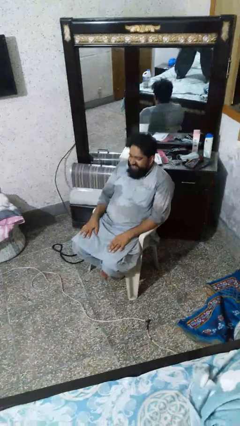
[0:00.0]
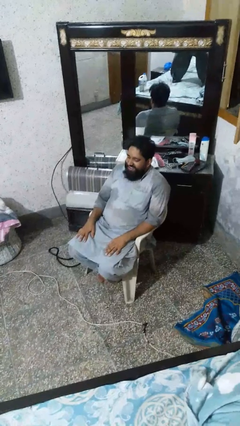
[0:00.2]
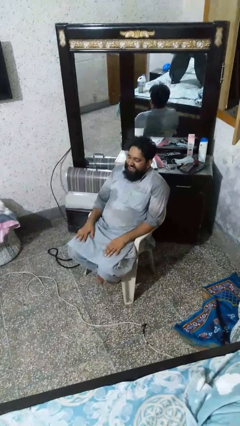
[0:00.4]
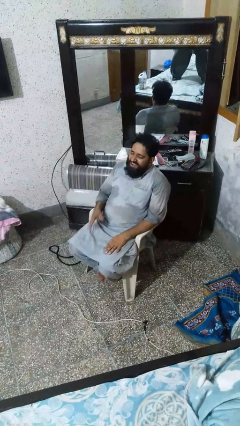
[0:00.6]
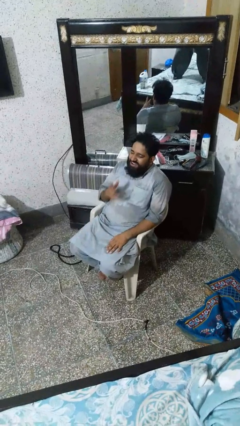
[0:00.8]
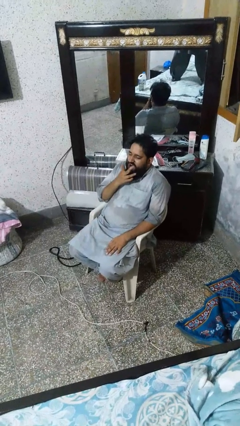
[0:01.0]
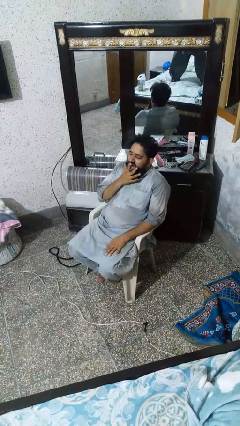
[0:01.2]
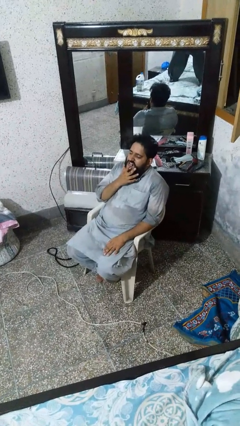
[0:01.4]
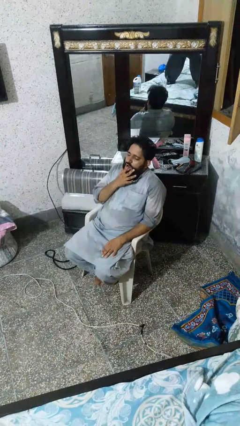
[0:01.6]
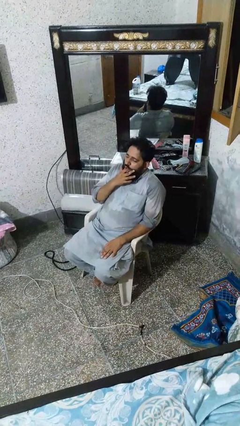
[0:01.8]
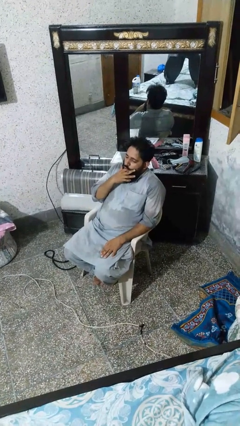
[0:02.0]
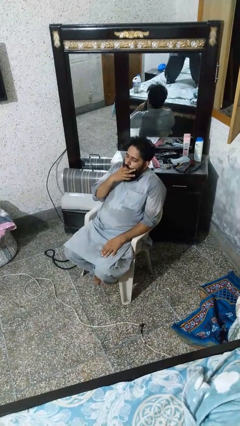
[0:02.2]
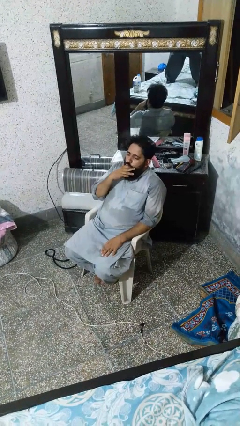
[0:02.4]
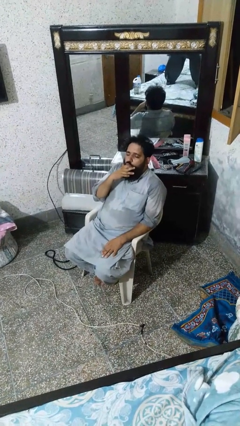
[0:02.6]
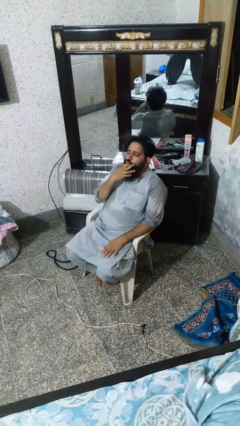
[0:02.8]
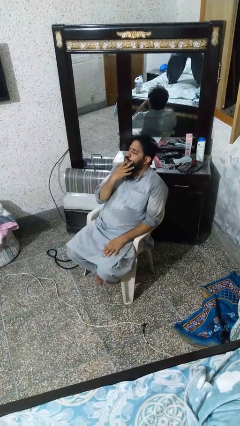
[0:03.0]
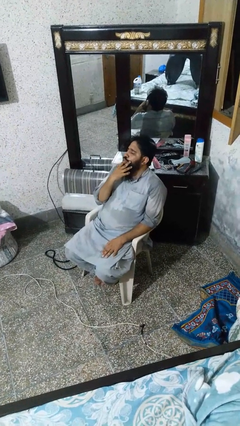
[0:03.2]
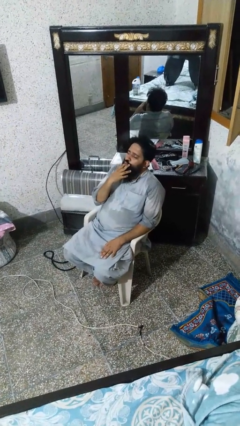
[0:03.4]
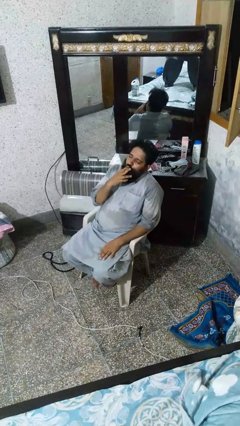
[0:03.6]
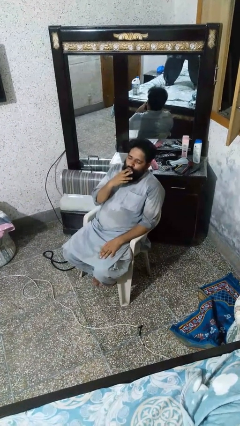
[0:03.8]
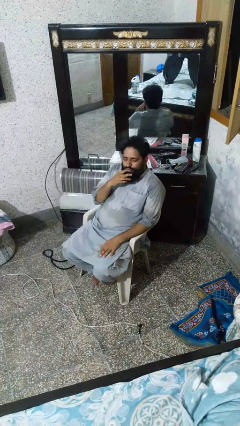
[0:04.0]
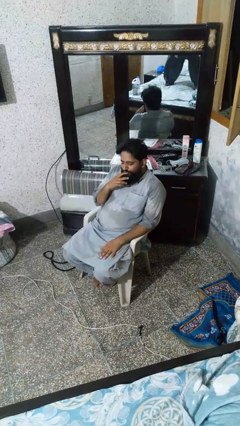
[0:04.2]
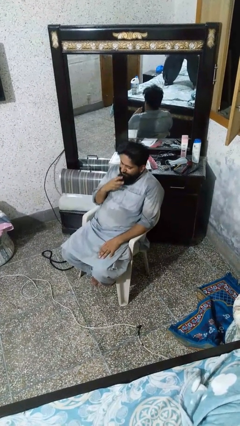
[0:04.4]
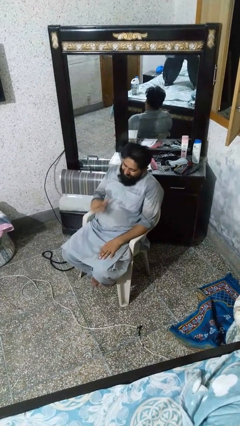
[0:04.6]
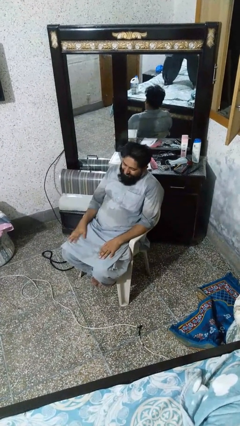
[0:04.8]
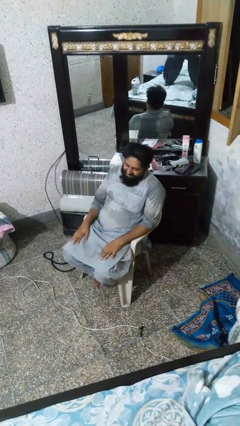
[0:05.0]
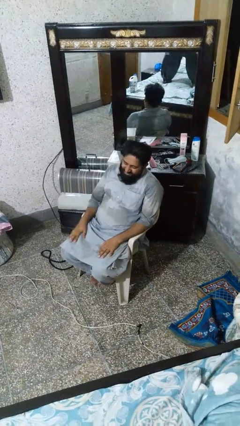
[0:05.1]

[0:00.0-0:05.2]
person licks fingers

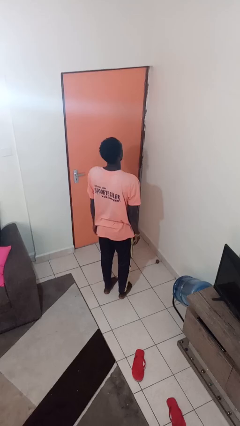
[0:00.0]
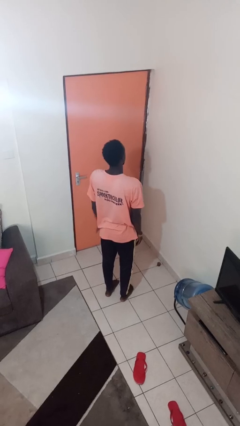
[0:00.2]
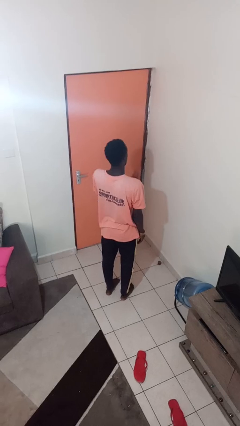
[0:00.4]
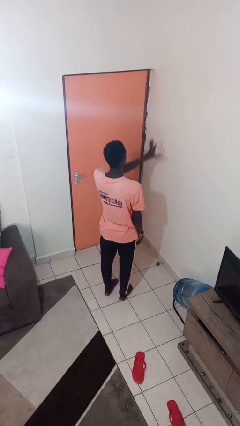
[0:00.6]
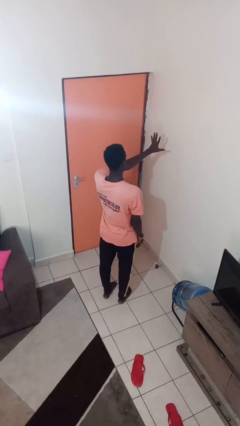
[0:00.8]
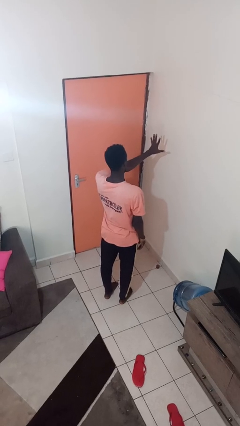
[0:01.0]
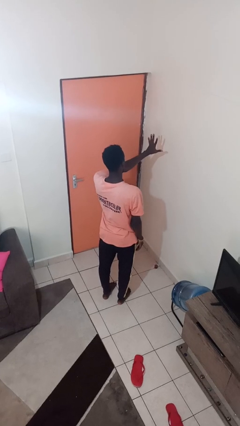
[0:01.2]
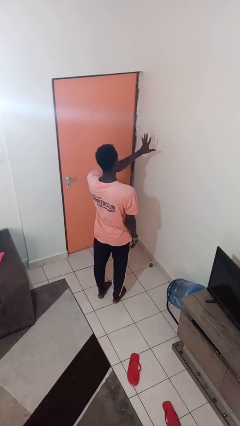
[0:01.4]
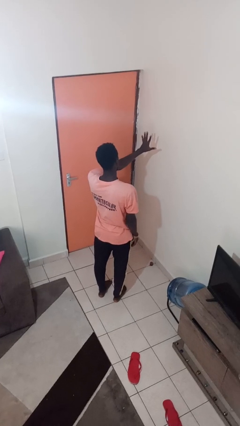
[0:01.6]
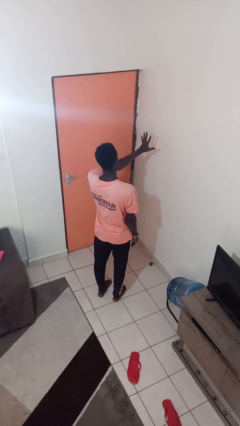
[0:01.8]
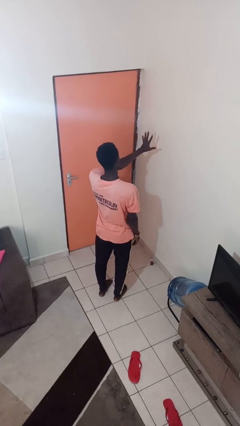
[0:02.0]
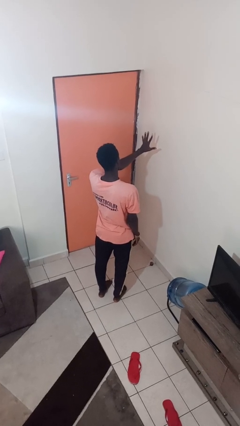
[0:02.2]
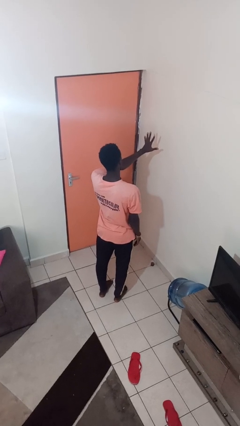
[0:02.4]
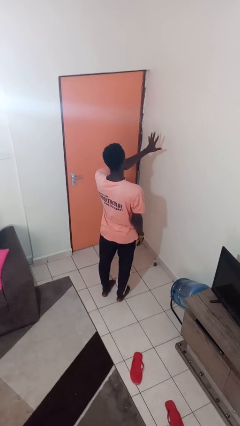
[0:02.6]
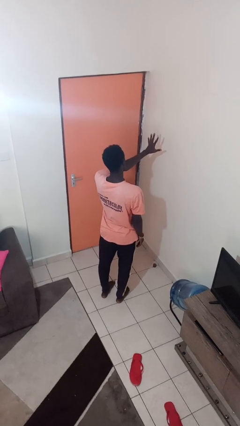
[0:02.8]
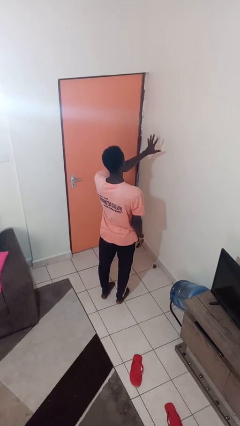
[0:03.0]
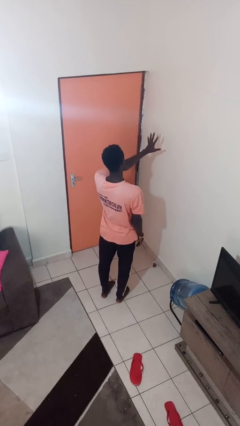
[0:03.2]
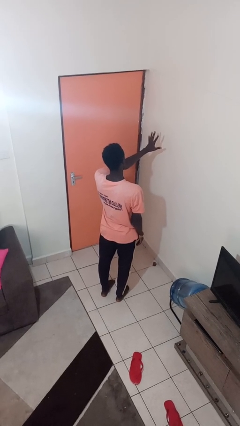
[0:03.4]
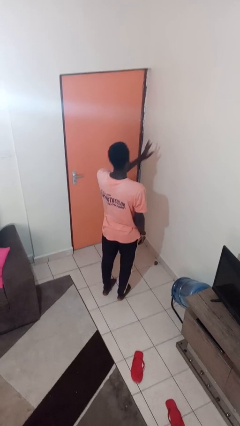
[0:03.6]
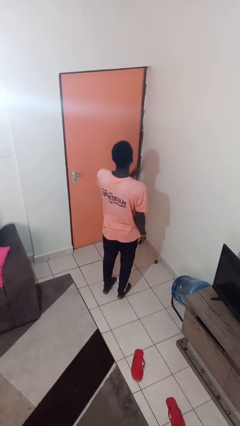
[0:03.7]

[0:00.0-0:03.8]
person gestures number five

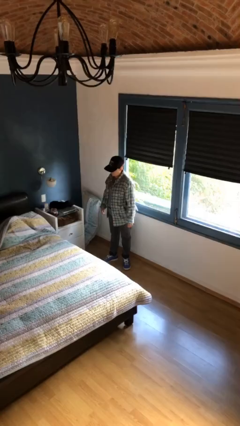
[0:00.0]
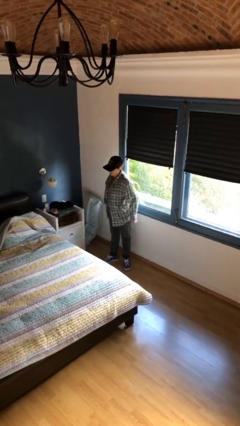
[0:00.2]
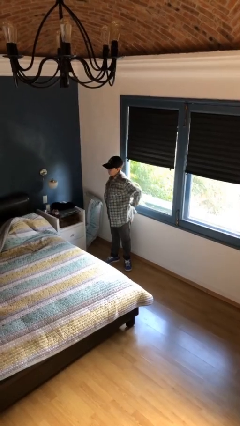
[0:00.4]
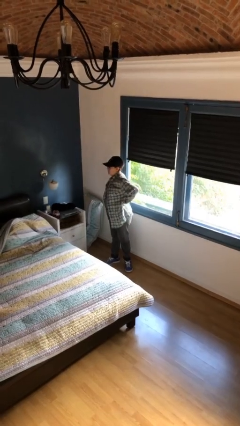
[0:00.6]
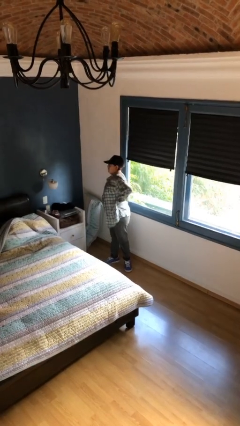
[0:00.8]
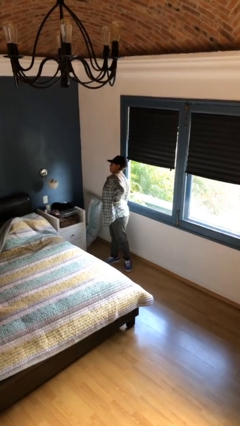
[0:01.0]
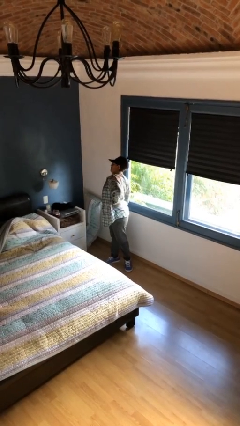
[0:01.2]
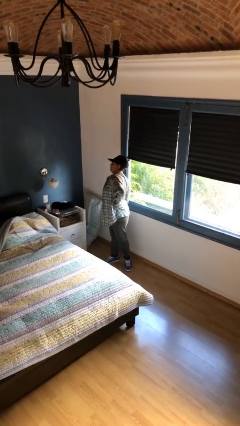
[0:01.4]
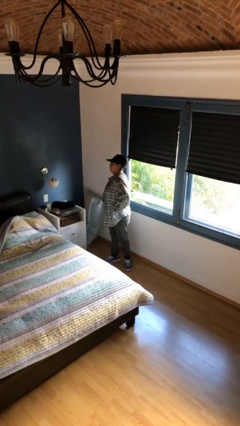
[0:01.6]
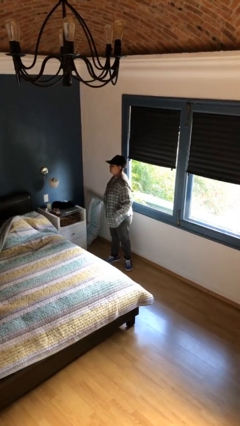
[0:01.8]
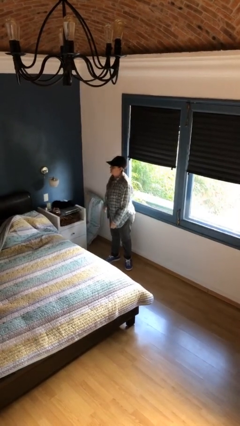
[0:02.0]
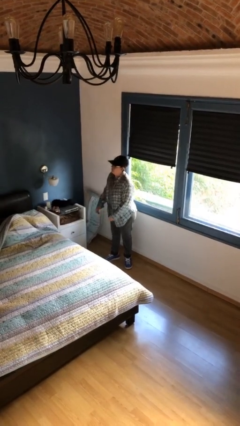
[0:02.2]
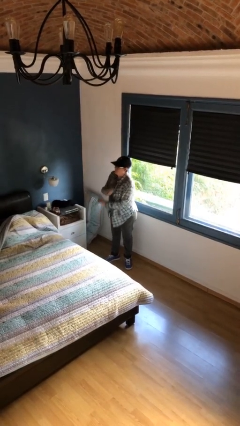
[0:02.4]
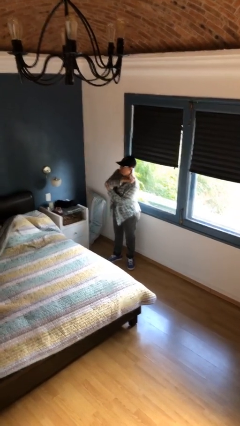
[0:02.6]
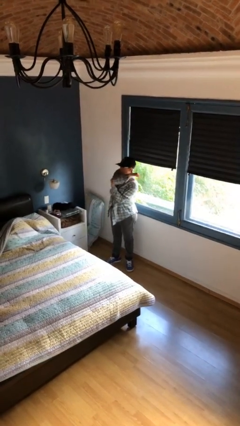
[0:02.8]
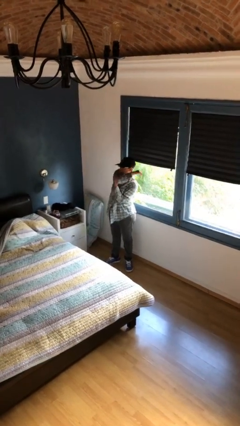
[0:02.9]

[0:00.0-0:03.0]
person stretches back

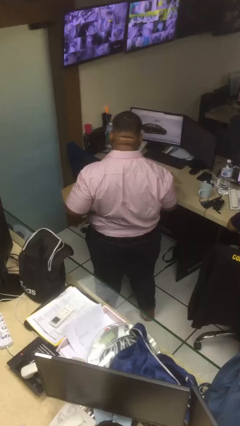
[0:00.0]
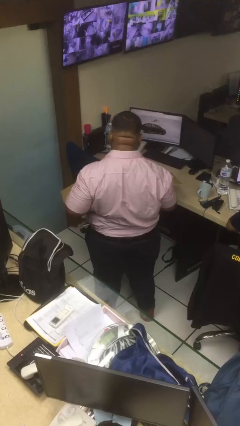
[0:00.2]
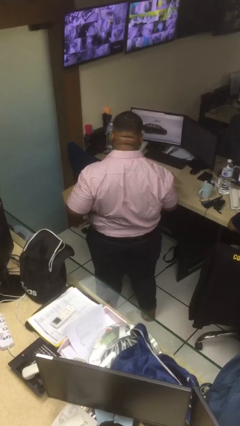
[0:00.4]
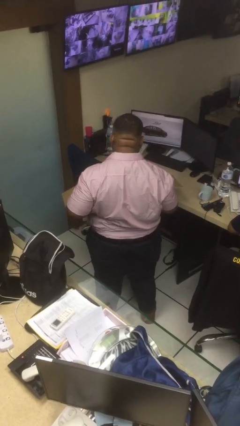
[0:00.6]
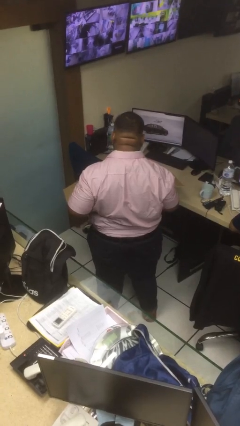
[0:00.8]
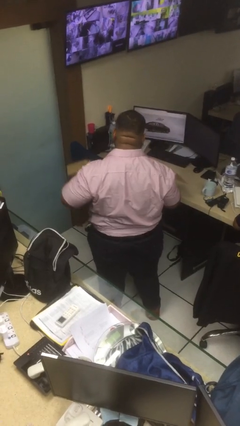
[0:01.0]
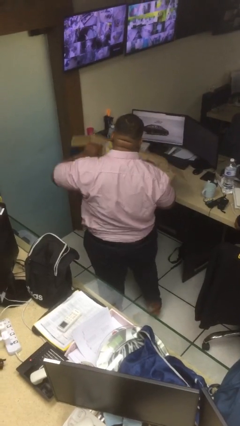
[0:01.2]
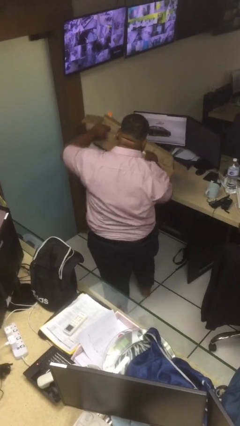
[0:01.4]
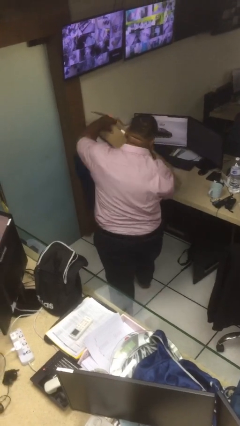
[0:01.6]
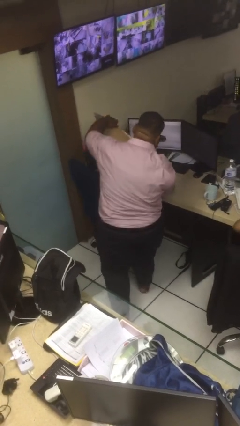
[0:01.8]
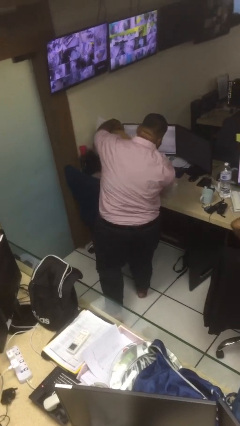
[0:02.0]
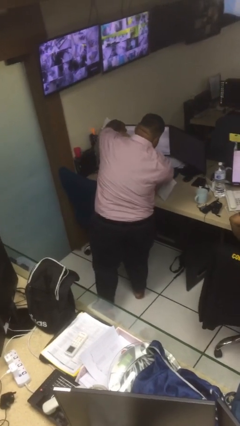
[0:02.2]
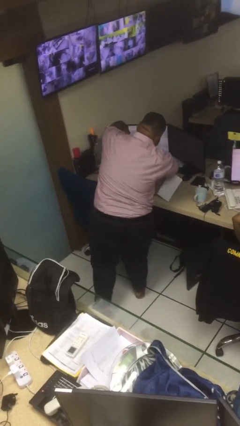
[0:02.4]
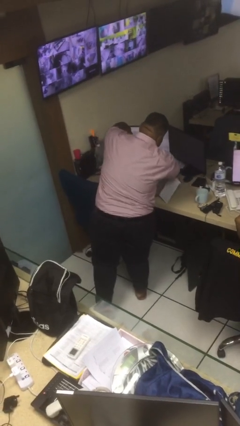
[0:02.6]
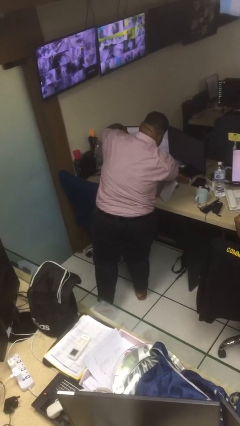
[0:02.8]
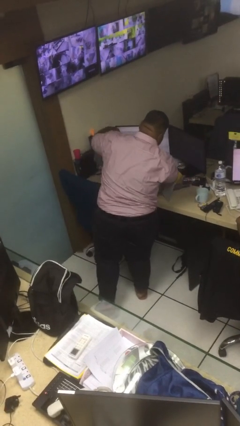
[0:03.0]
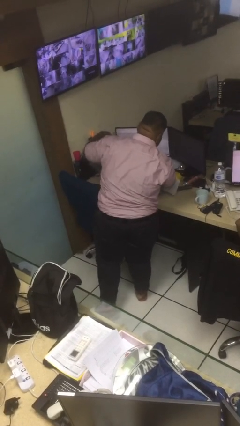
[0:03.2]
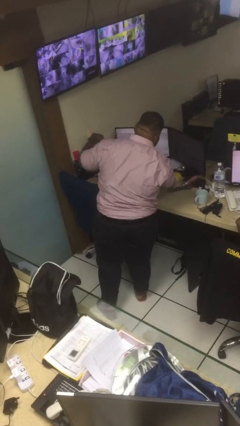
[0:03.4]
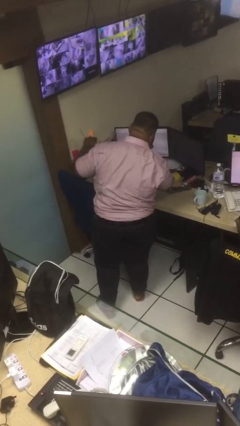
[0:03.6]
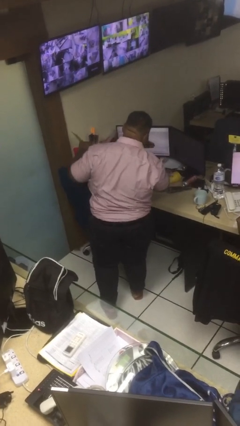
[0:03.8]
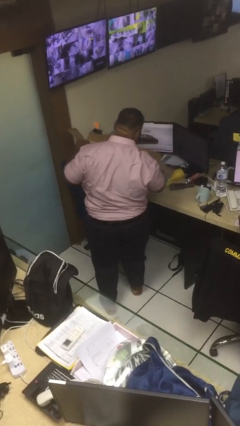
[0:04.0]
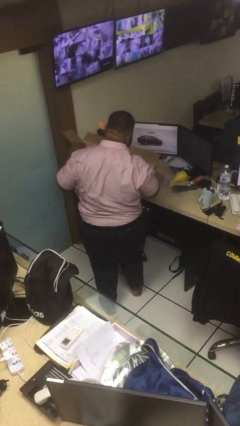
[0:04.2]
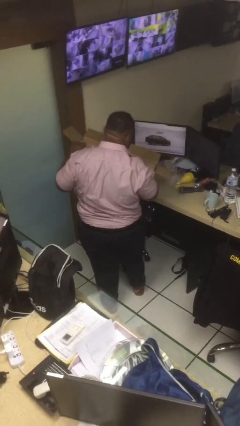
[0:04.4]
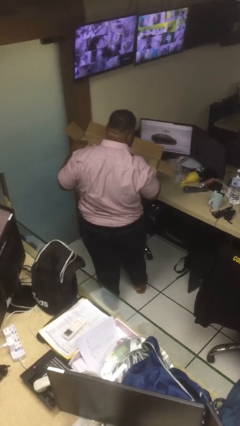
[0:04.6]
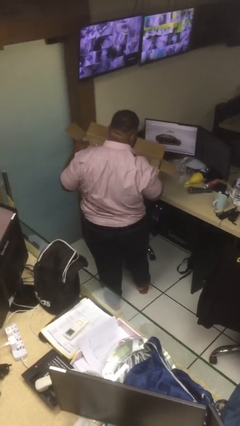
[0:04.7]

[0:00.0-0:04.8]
person unloads box onto table

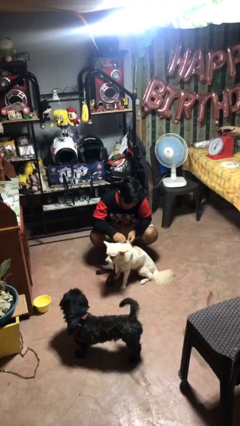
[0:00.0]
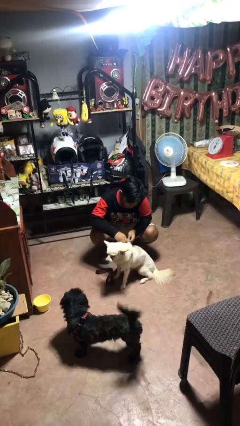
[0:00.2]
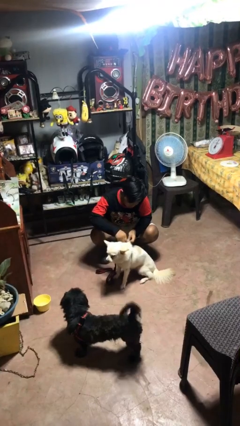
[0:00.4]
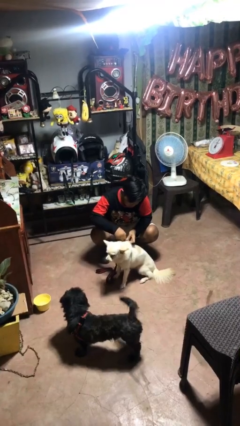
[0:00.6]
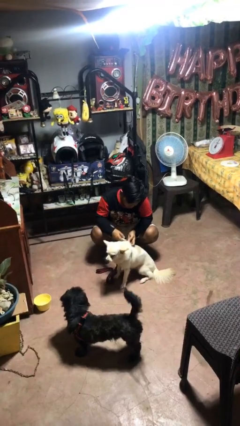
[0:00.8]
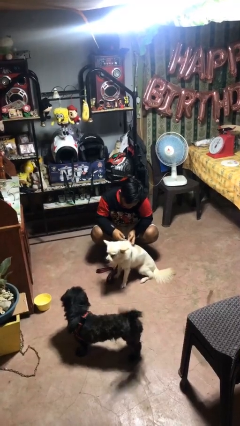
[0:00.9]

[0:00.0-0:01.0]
person attaches leash to dog
